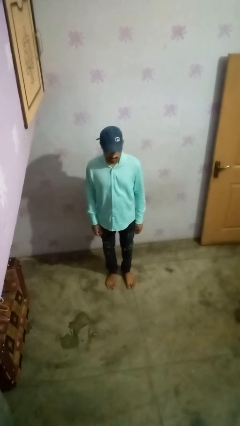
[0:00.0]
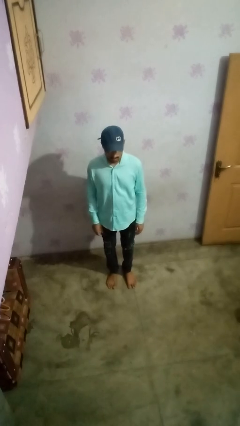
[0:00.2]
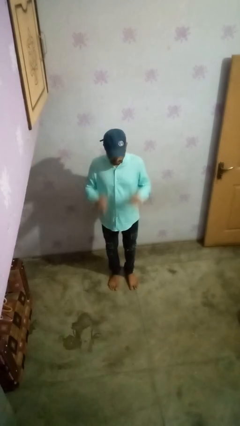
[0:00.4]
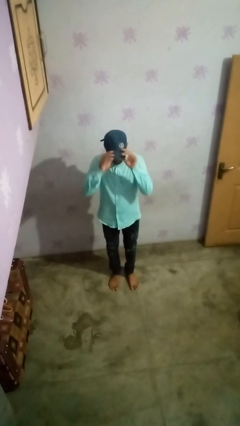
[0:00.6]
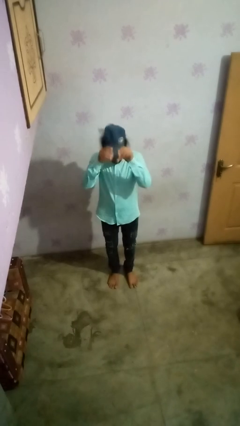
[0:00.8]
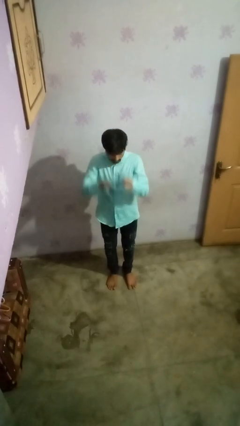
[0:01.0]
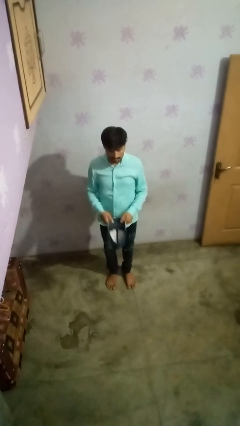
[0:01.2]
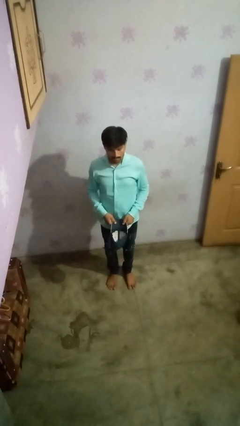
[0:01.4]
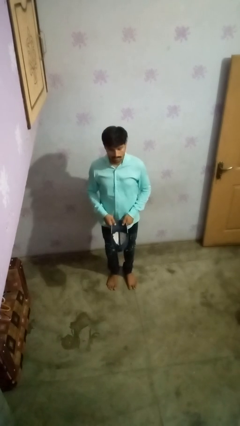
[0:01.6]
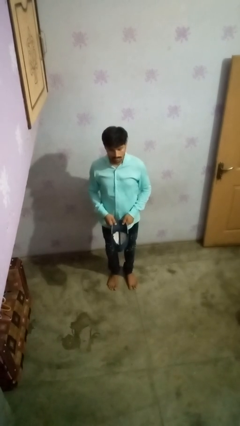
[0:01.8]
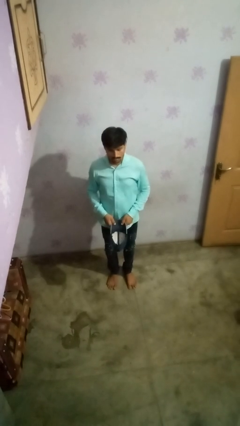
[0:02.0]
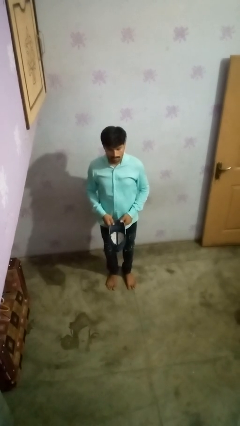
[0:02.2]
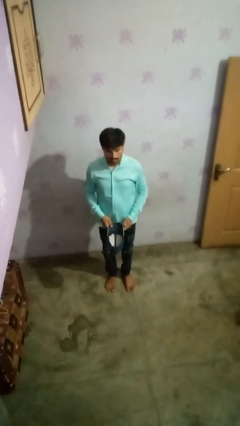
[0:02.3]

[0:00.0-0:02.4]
person takes off hat

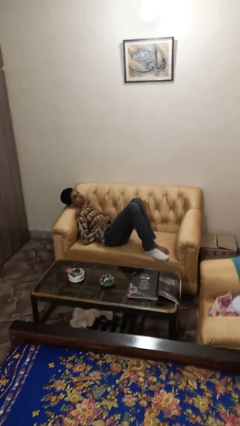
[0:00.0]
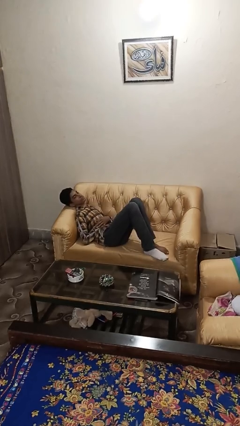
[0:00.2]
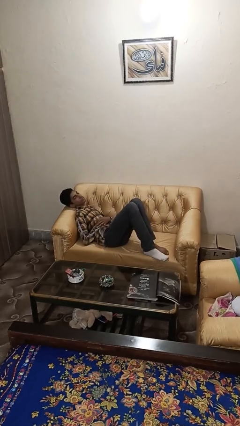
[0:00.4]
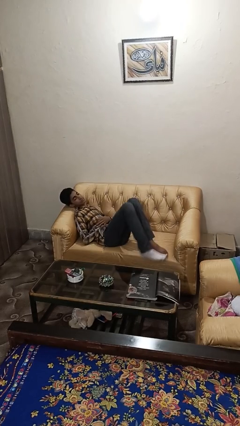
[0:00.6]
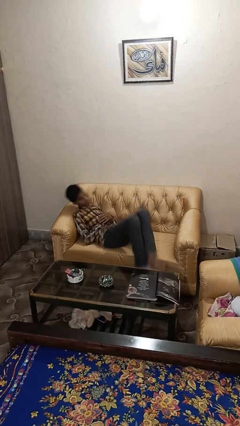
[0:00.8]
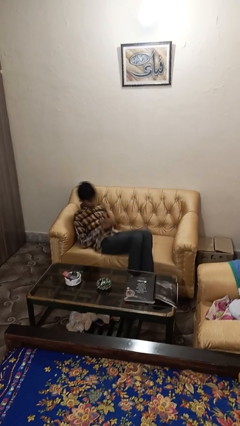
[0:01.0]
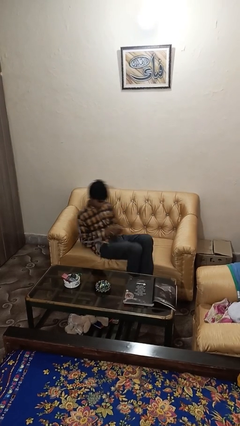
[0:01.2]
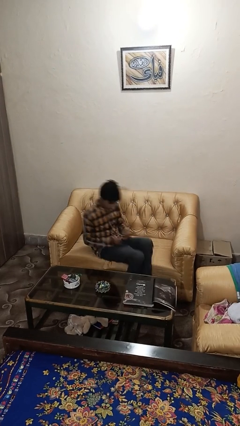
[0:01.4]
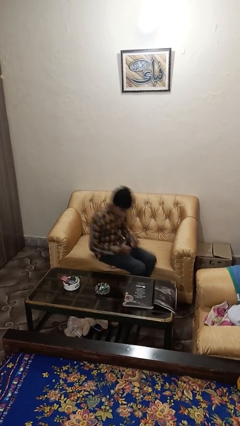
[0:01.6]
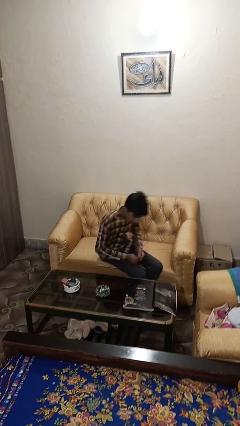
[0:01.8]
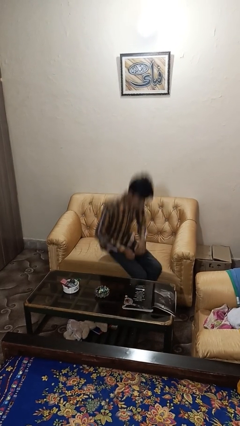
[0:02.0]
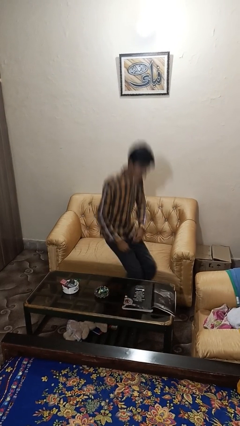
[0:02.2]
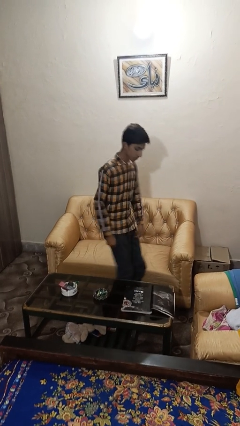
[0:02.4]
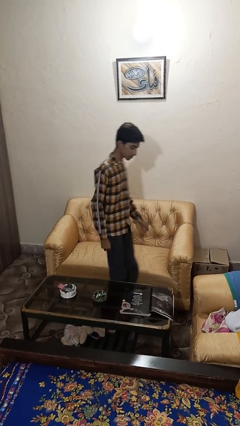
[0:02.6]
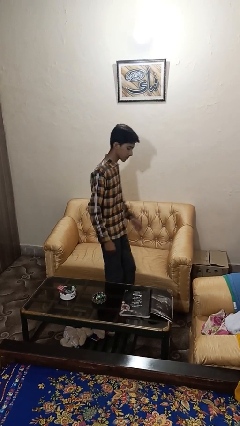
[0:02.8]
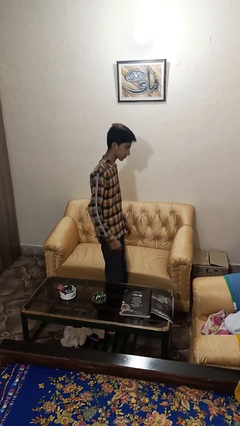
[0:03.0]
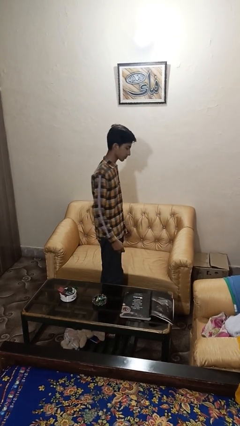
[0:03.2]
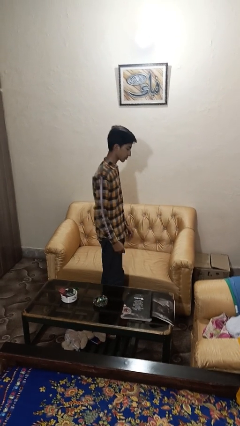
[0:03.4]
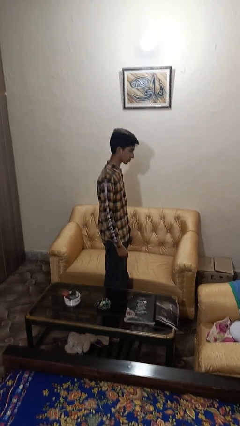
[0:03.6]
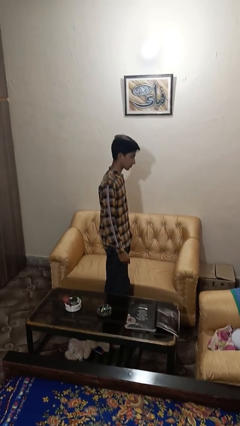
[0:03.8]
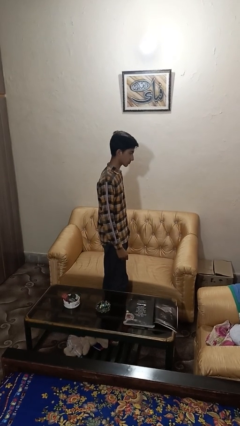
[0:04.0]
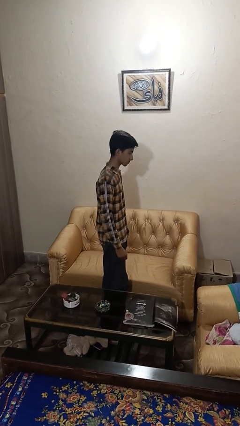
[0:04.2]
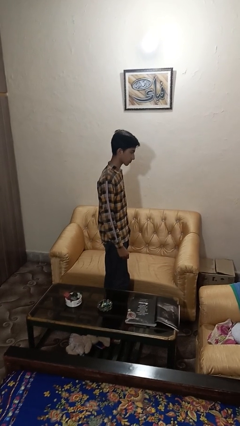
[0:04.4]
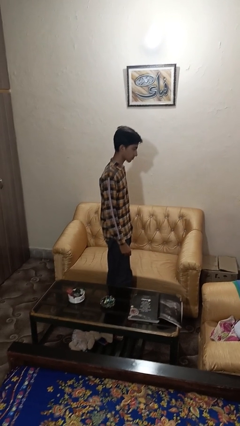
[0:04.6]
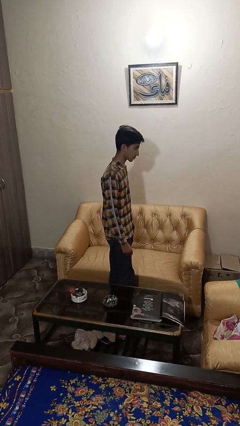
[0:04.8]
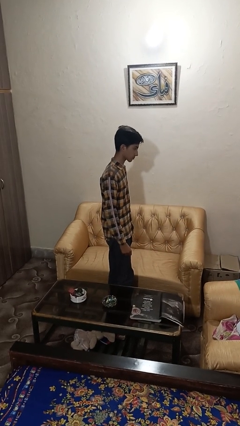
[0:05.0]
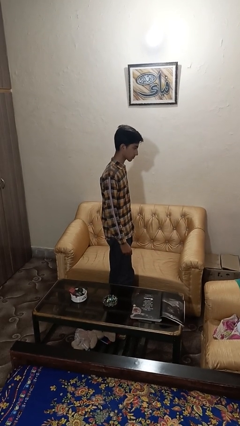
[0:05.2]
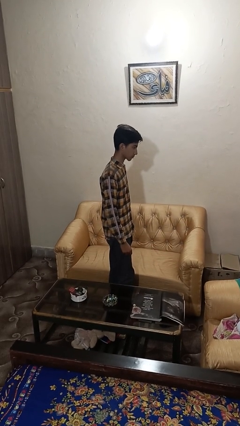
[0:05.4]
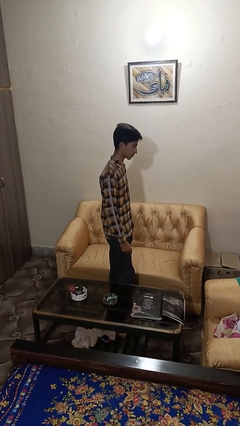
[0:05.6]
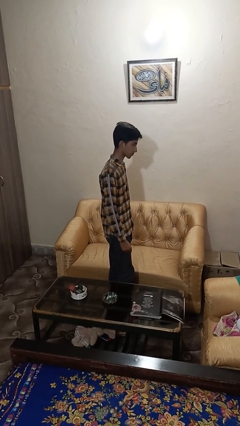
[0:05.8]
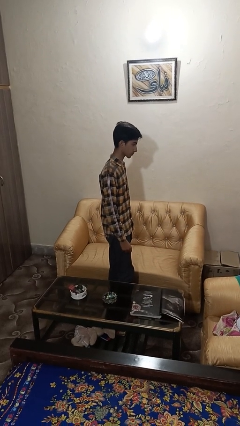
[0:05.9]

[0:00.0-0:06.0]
person stands up

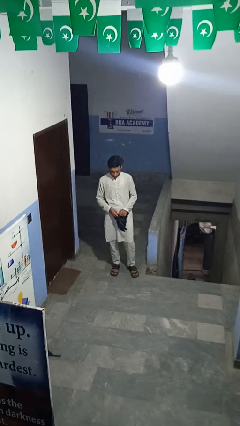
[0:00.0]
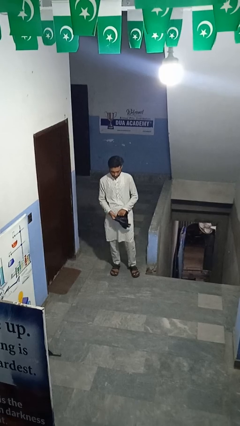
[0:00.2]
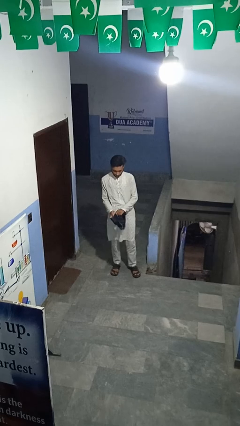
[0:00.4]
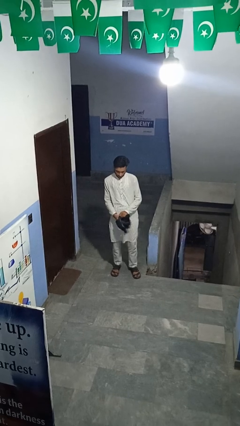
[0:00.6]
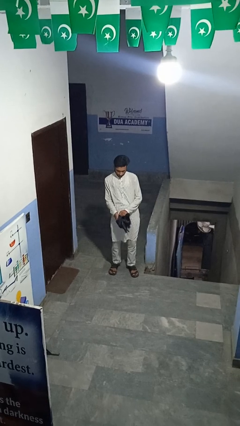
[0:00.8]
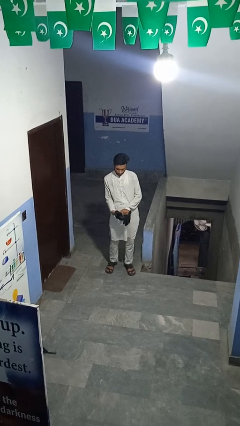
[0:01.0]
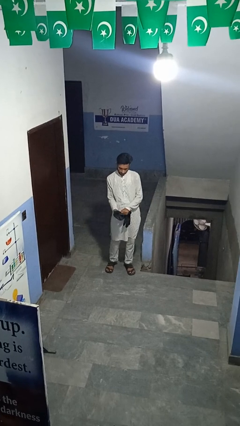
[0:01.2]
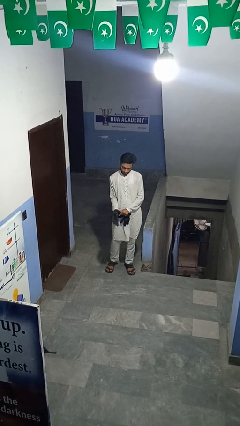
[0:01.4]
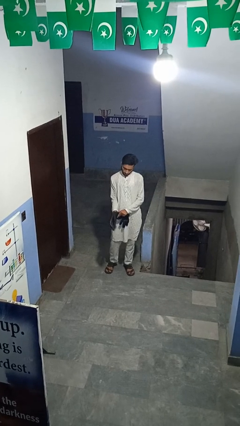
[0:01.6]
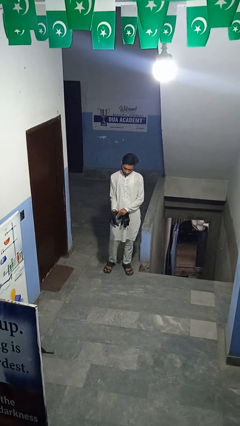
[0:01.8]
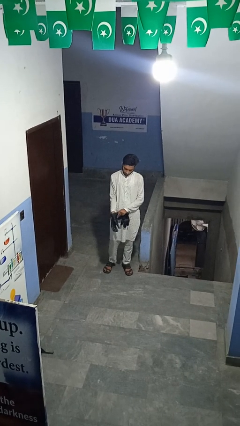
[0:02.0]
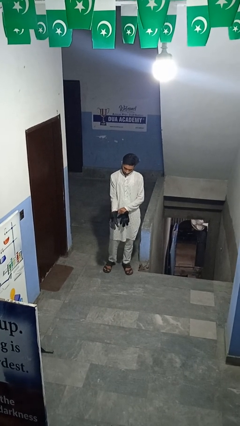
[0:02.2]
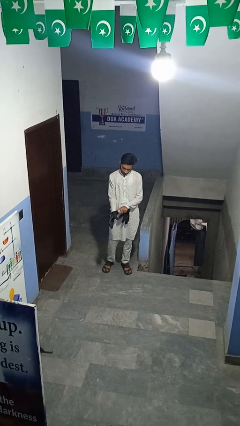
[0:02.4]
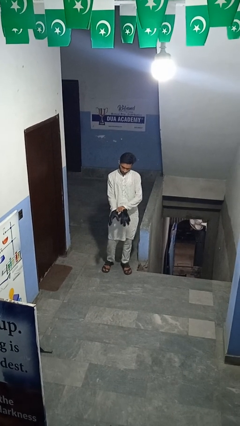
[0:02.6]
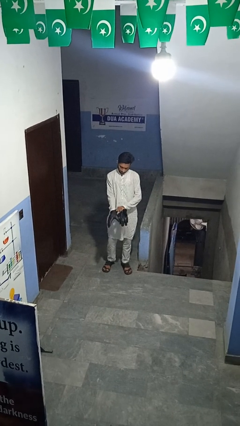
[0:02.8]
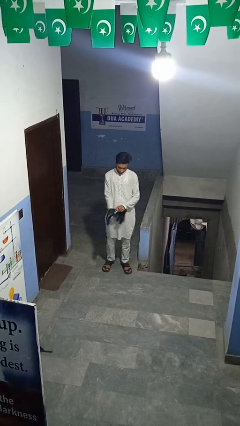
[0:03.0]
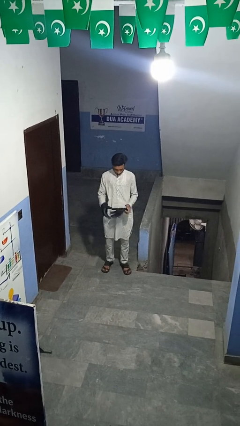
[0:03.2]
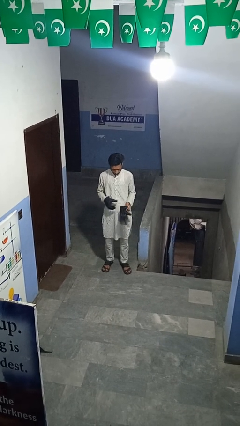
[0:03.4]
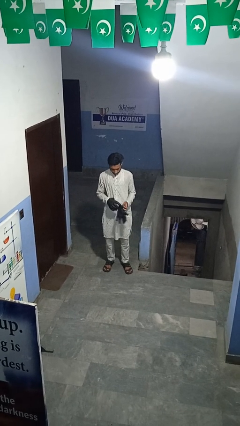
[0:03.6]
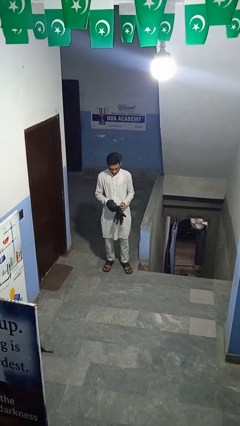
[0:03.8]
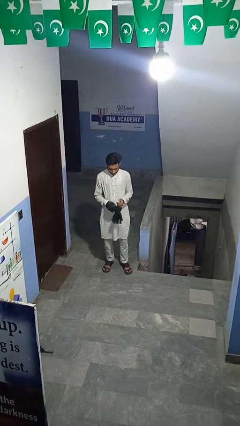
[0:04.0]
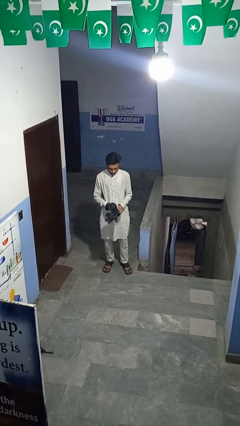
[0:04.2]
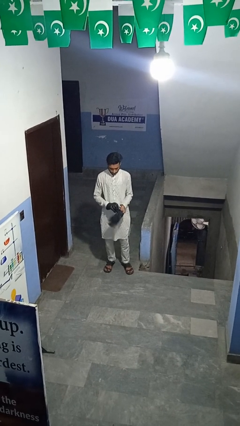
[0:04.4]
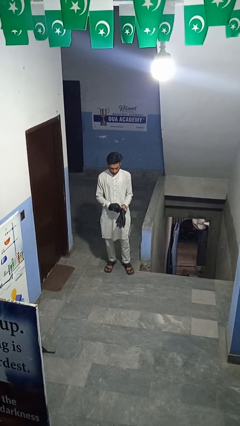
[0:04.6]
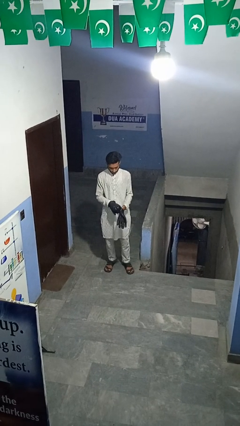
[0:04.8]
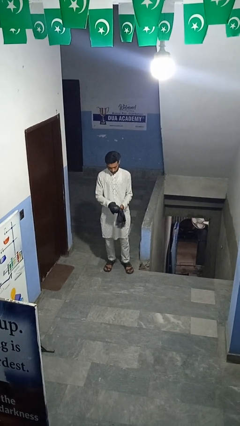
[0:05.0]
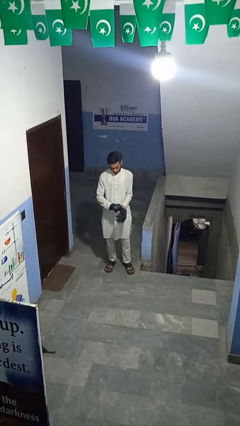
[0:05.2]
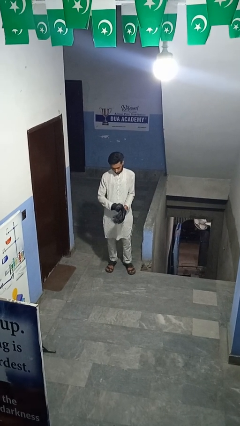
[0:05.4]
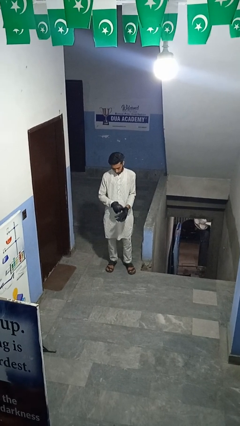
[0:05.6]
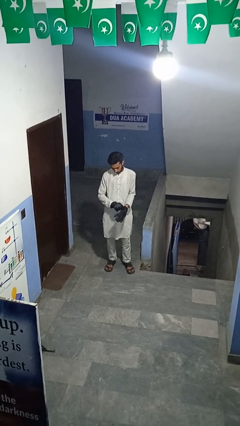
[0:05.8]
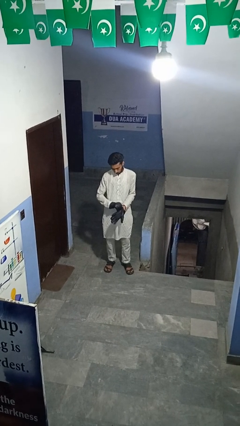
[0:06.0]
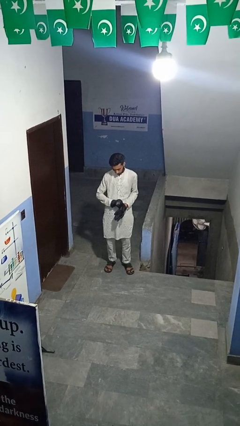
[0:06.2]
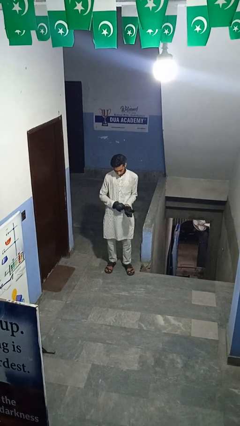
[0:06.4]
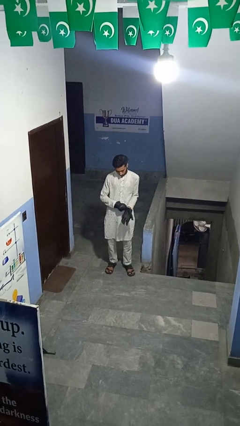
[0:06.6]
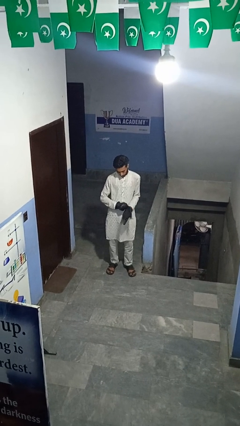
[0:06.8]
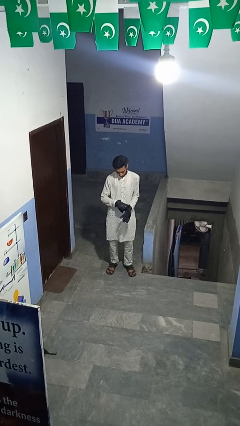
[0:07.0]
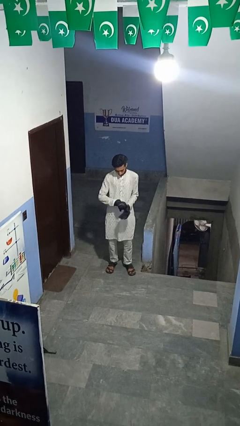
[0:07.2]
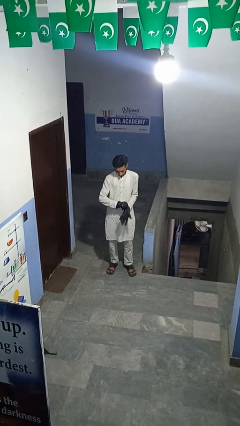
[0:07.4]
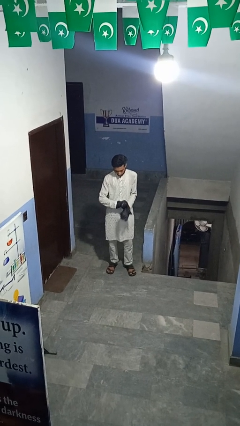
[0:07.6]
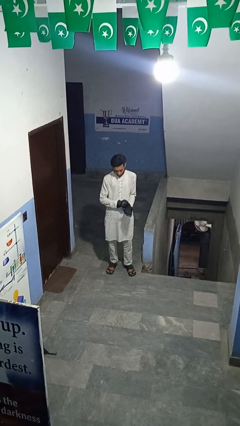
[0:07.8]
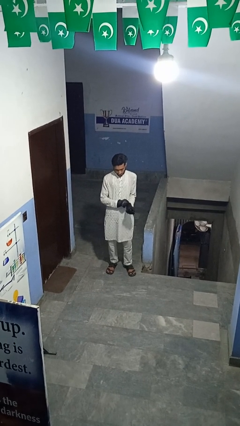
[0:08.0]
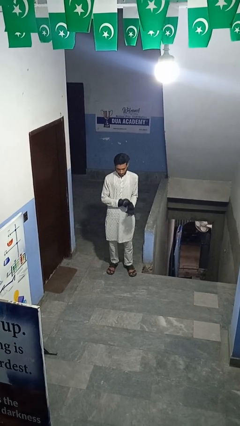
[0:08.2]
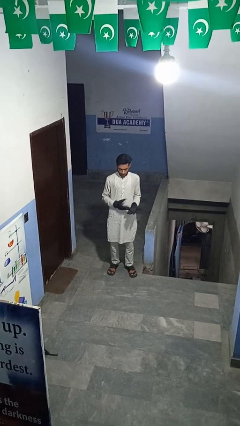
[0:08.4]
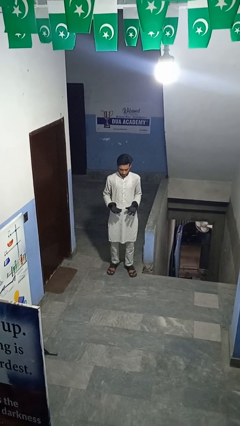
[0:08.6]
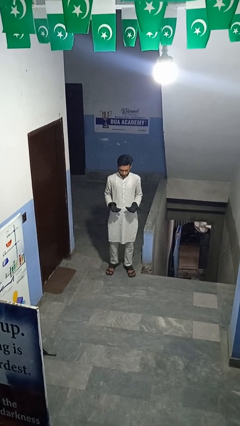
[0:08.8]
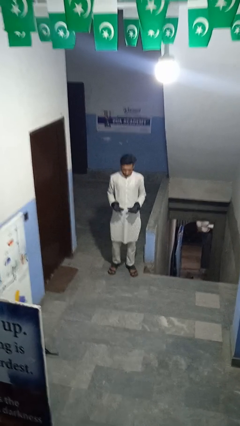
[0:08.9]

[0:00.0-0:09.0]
person puts on gloves

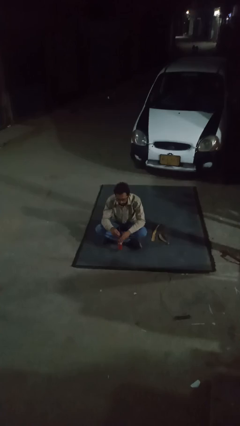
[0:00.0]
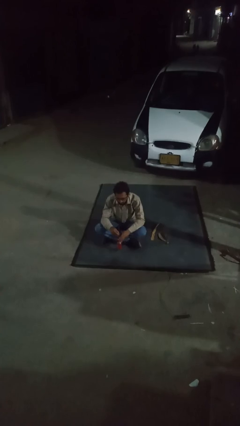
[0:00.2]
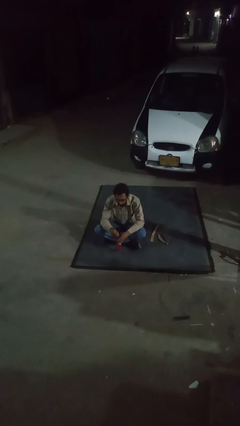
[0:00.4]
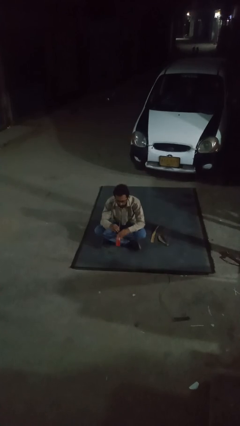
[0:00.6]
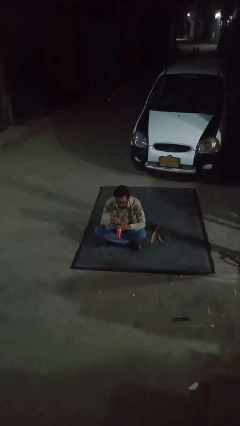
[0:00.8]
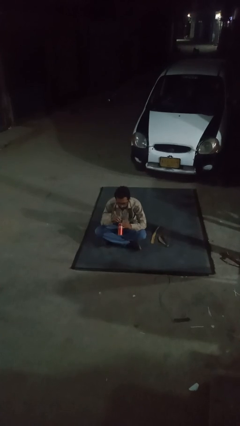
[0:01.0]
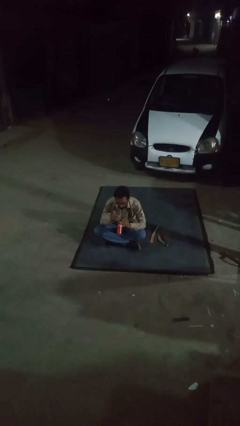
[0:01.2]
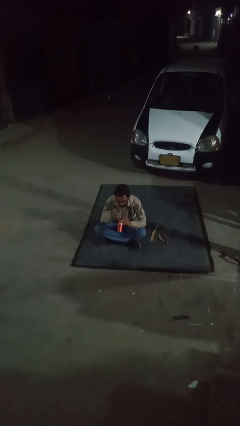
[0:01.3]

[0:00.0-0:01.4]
person drinks from straw
